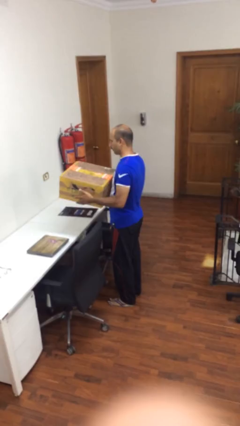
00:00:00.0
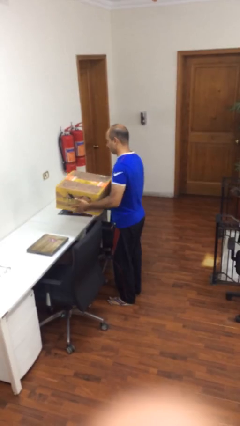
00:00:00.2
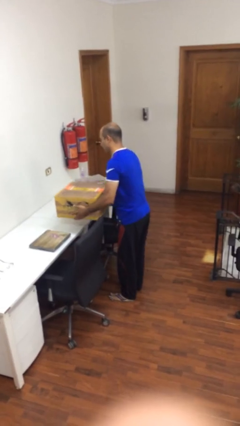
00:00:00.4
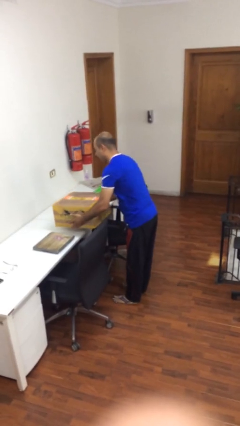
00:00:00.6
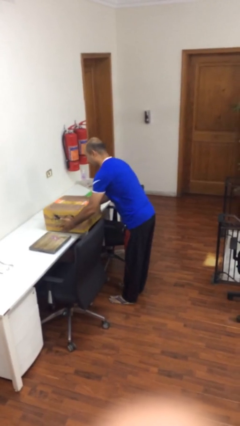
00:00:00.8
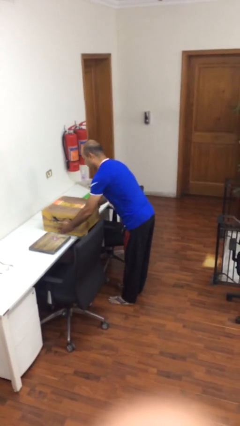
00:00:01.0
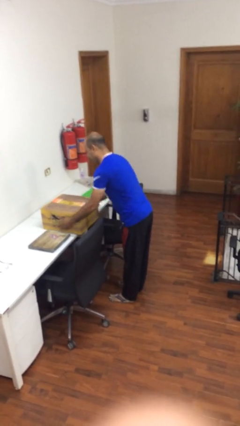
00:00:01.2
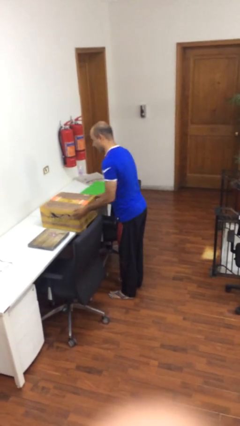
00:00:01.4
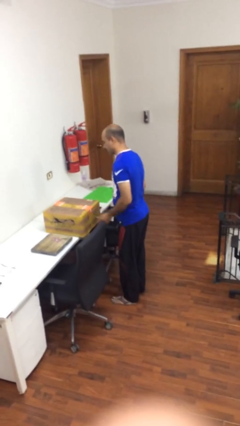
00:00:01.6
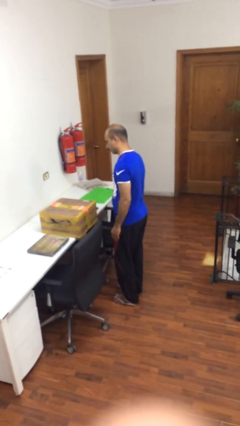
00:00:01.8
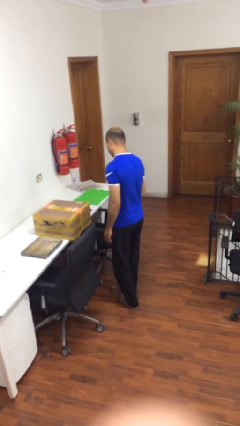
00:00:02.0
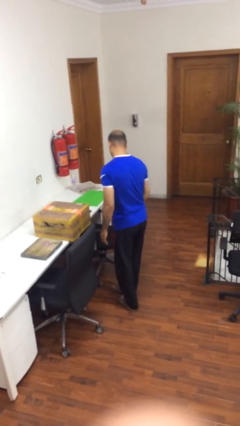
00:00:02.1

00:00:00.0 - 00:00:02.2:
person puts down object on table

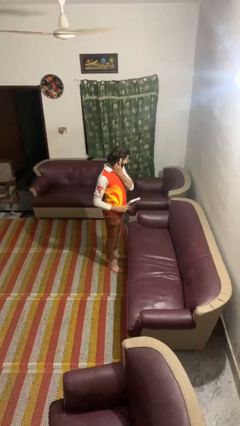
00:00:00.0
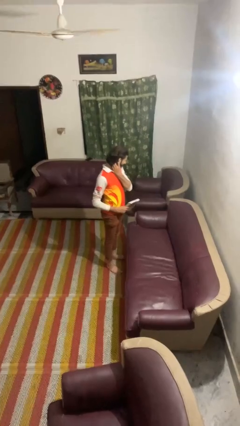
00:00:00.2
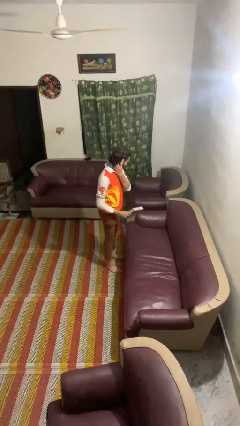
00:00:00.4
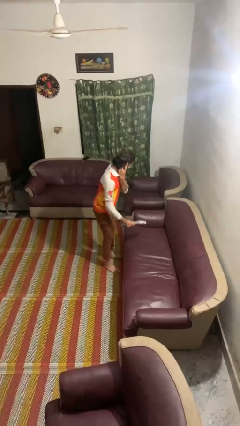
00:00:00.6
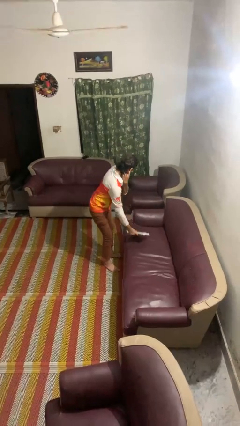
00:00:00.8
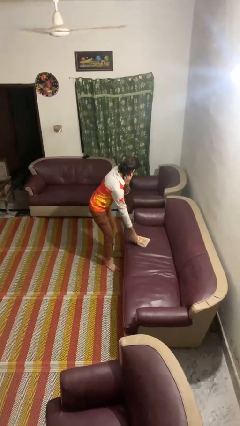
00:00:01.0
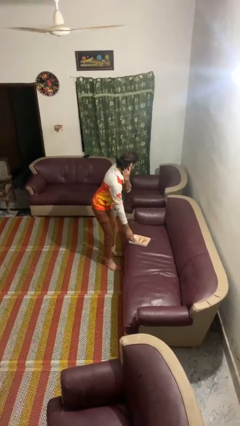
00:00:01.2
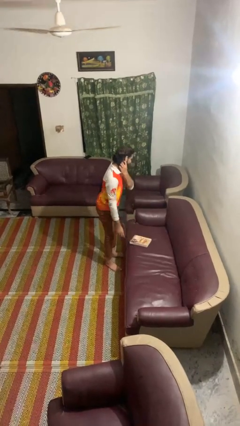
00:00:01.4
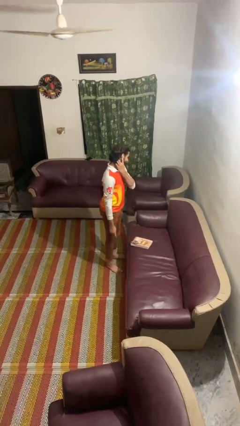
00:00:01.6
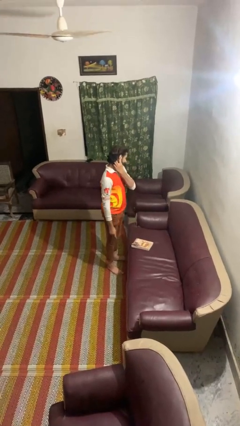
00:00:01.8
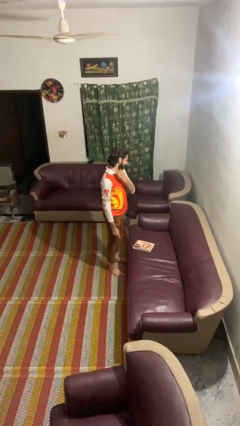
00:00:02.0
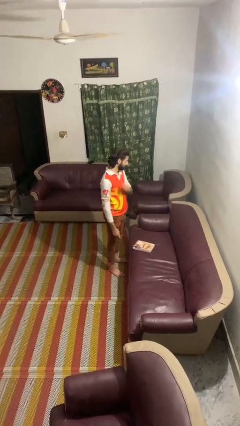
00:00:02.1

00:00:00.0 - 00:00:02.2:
person puts down object on couch

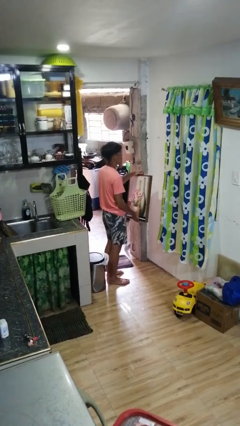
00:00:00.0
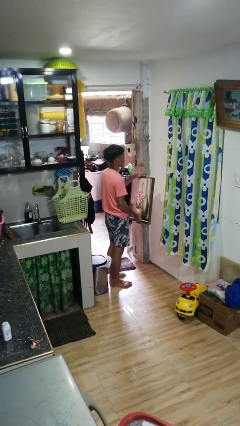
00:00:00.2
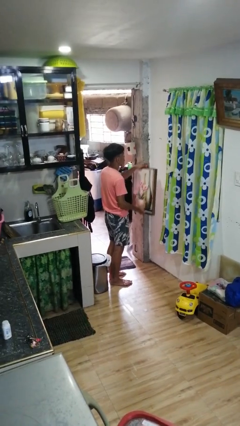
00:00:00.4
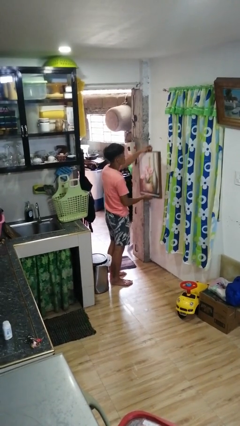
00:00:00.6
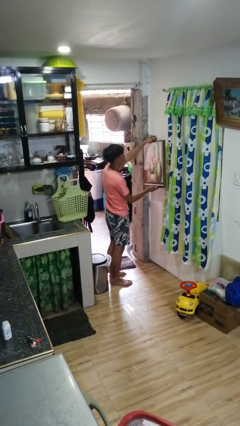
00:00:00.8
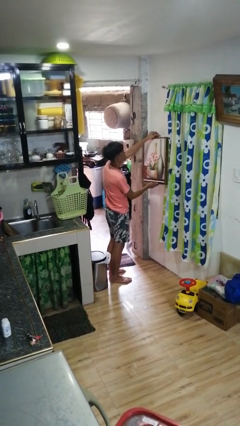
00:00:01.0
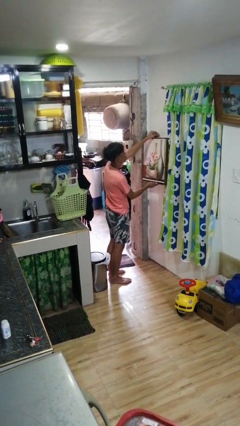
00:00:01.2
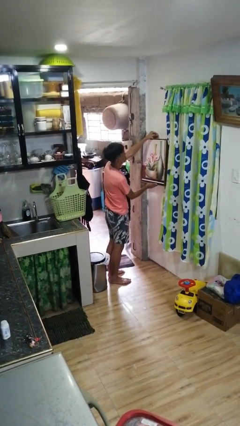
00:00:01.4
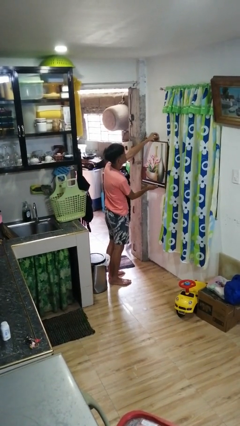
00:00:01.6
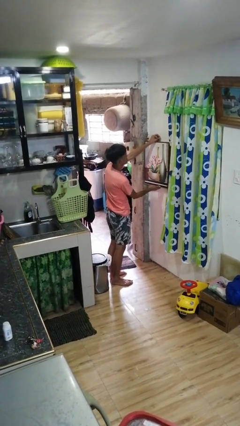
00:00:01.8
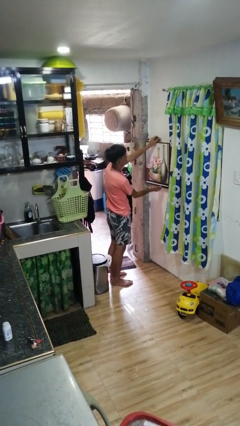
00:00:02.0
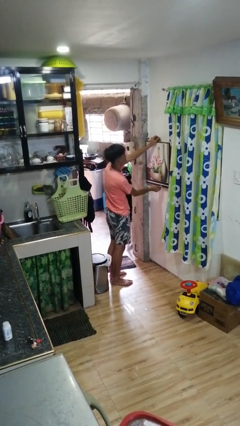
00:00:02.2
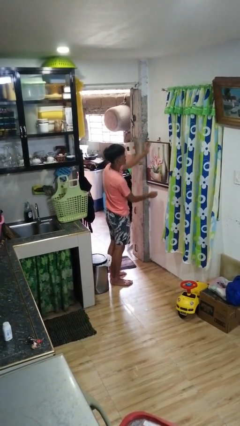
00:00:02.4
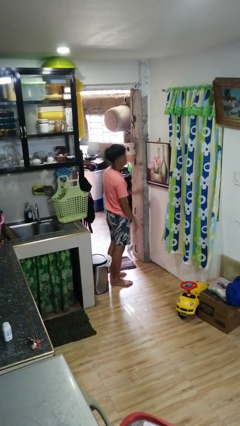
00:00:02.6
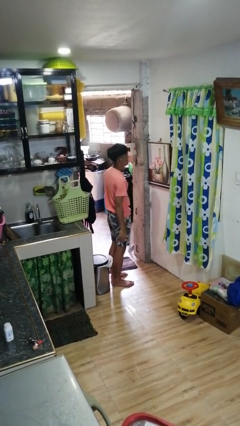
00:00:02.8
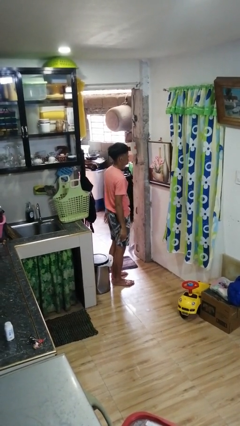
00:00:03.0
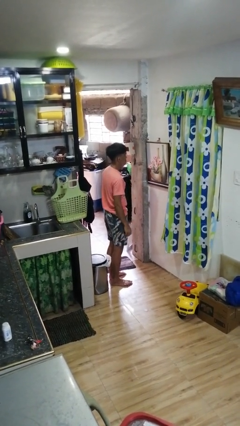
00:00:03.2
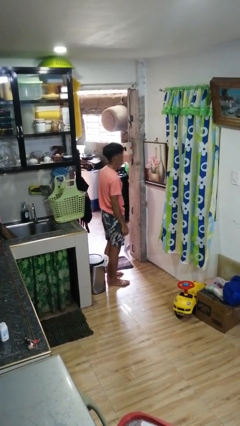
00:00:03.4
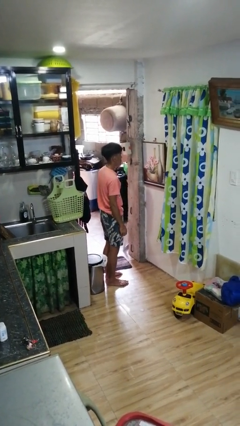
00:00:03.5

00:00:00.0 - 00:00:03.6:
person puts up picture frame

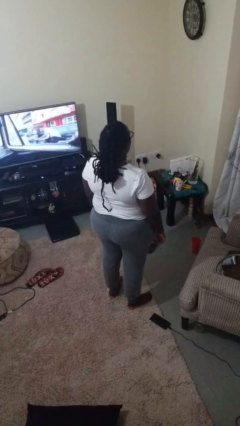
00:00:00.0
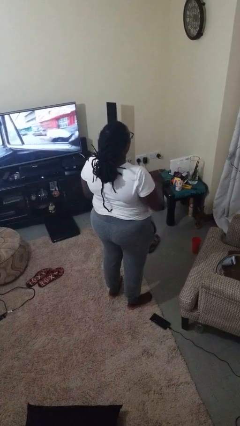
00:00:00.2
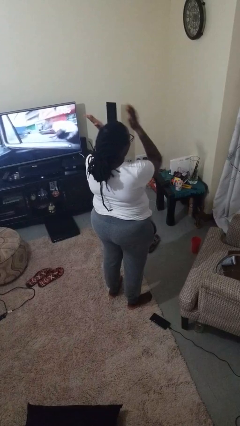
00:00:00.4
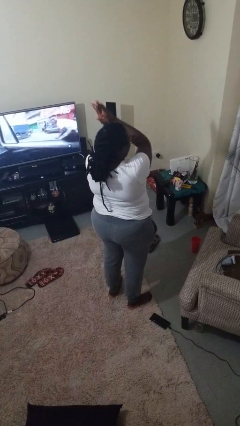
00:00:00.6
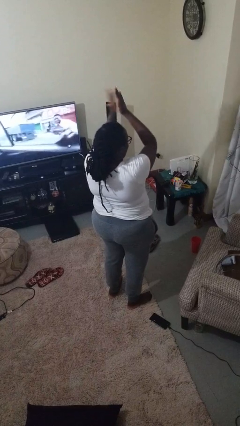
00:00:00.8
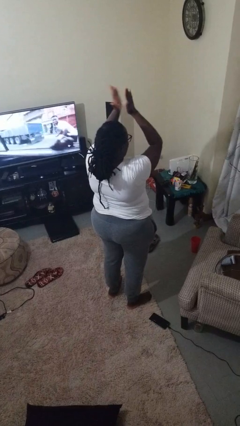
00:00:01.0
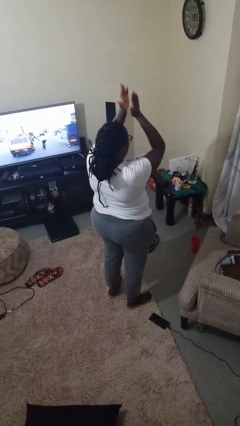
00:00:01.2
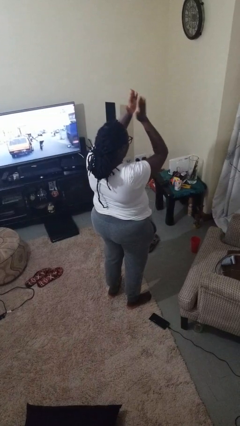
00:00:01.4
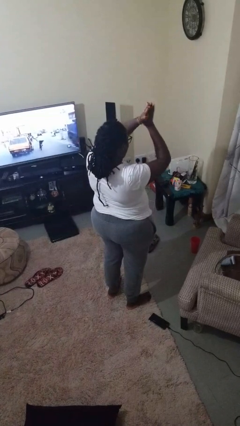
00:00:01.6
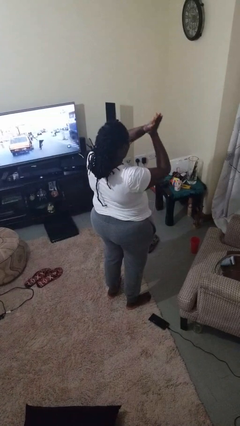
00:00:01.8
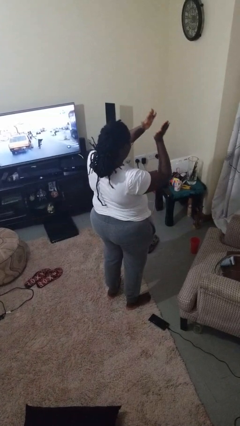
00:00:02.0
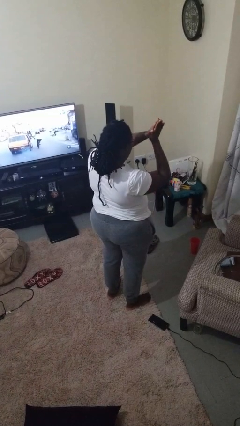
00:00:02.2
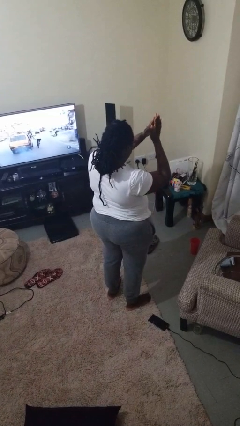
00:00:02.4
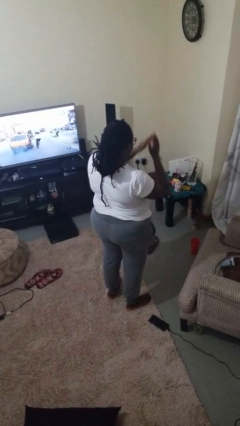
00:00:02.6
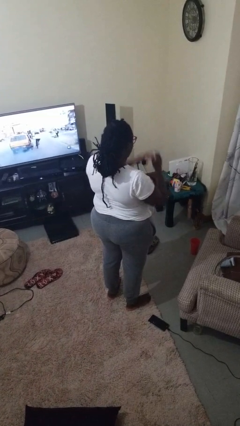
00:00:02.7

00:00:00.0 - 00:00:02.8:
person claps hands

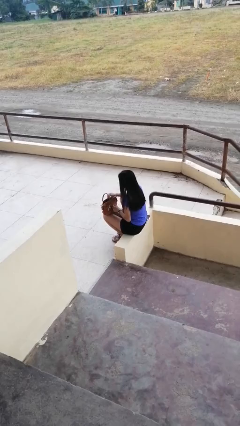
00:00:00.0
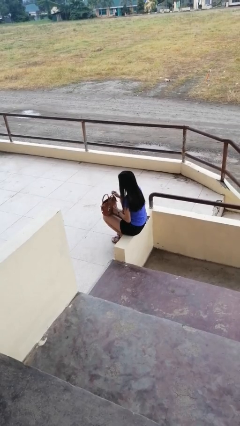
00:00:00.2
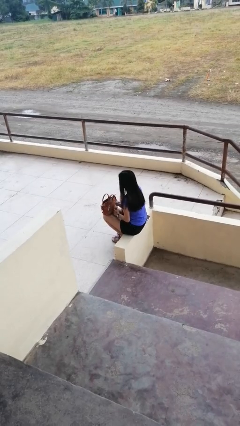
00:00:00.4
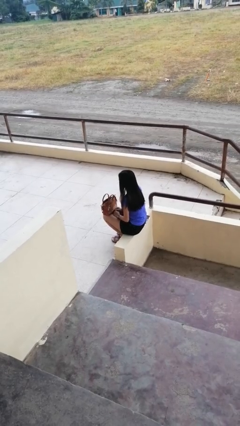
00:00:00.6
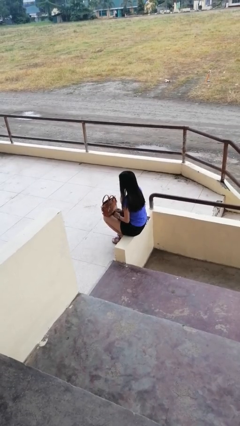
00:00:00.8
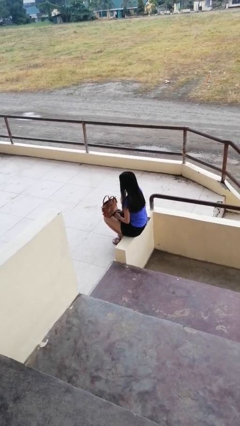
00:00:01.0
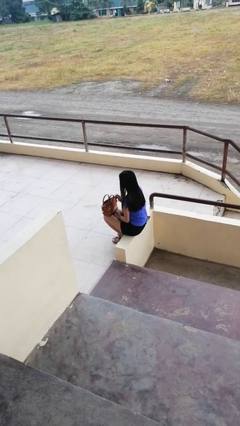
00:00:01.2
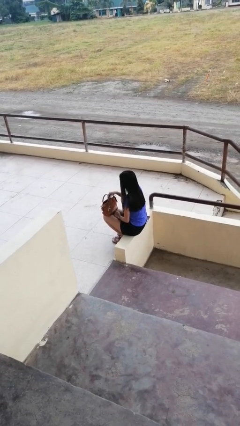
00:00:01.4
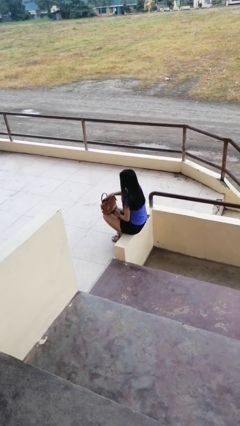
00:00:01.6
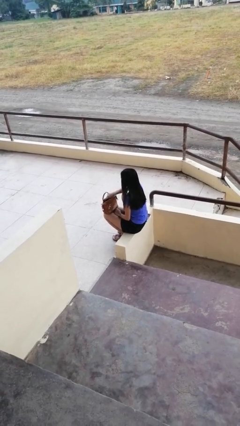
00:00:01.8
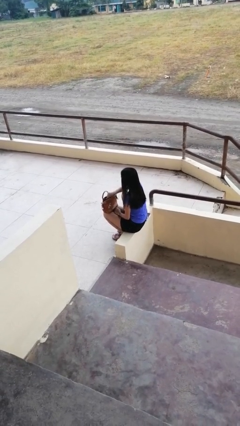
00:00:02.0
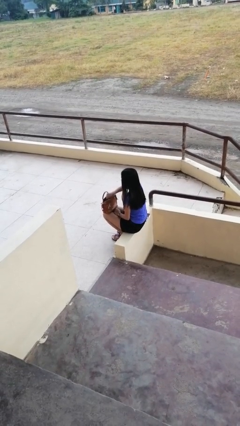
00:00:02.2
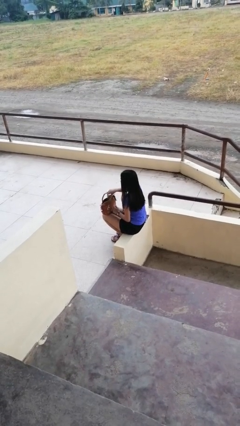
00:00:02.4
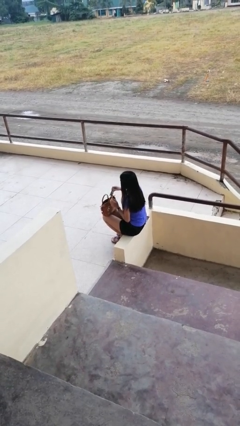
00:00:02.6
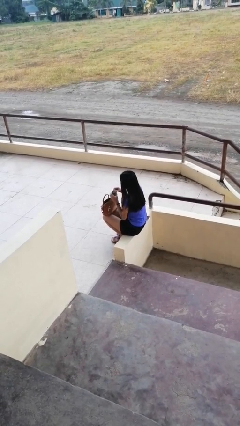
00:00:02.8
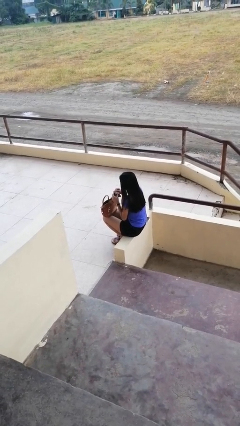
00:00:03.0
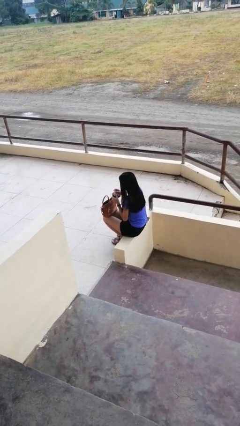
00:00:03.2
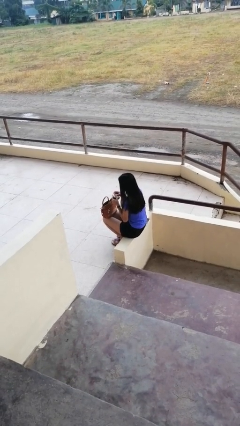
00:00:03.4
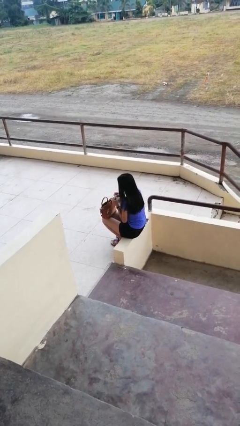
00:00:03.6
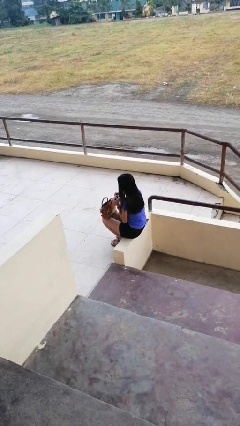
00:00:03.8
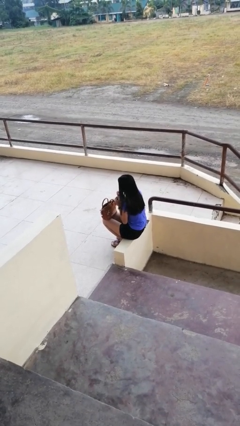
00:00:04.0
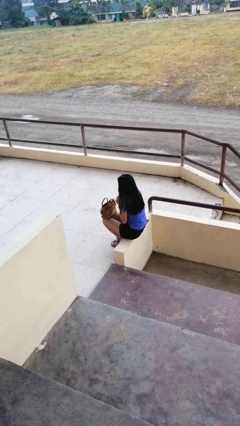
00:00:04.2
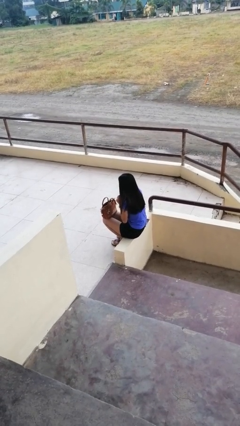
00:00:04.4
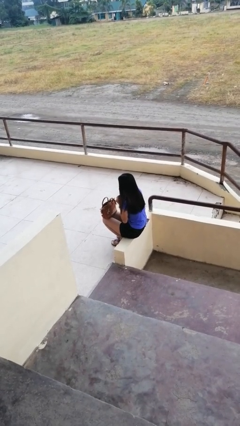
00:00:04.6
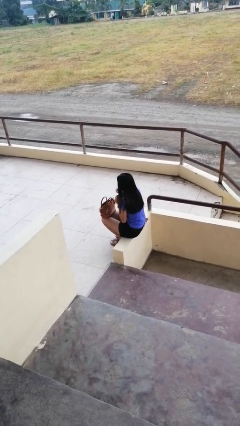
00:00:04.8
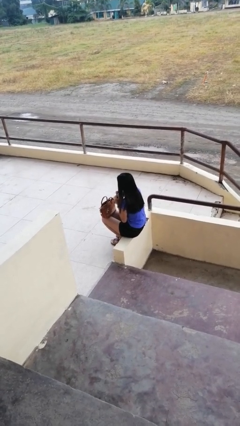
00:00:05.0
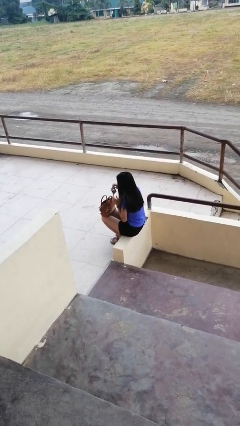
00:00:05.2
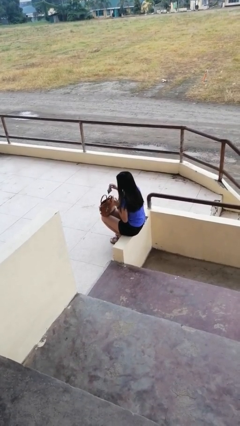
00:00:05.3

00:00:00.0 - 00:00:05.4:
person eats snack from bag

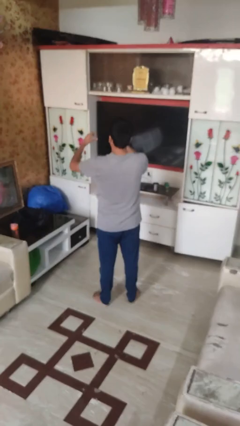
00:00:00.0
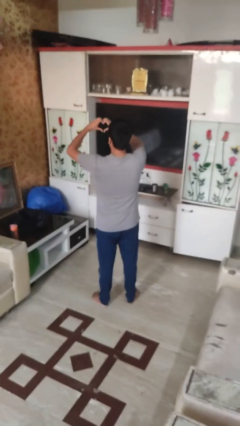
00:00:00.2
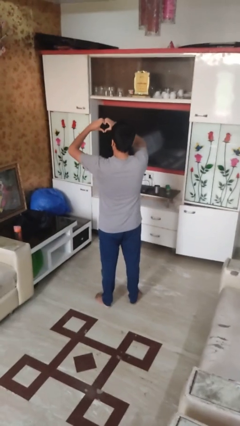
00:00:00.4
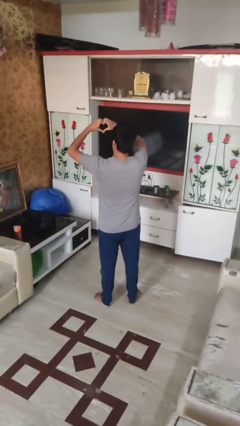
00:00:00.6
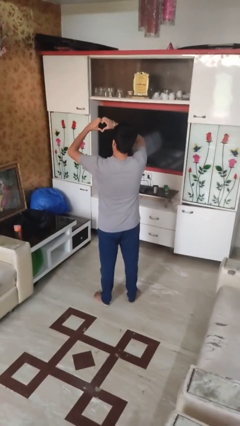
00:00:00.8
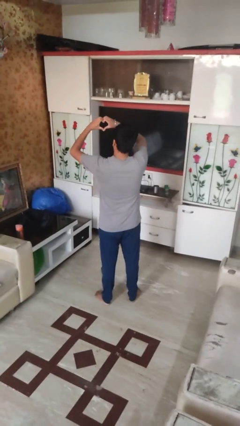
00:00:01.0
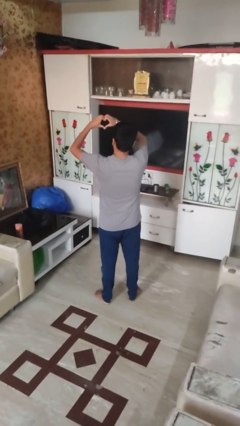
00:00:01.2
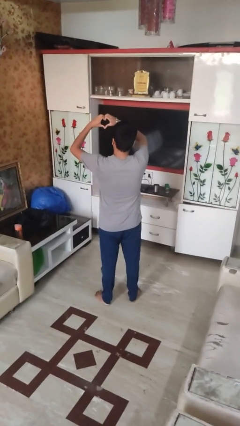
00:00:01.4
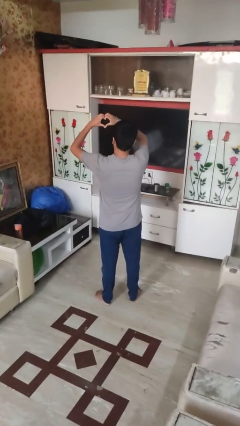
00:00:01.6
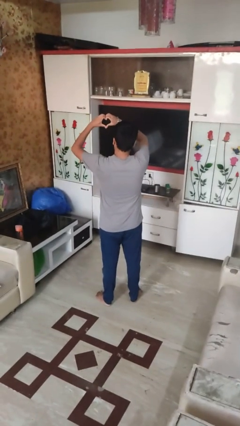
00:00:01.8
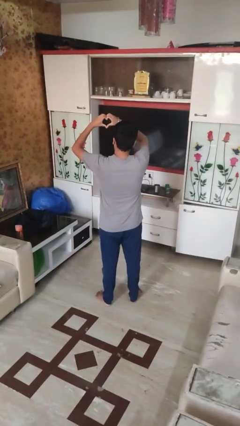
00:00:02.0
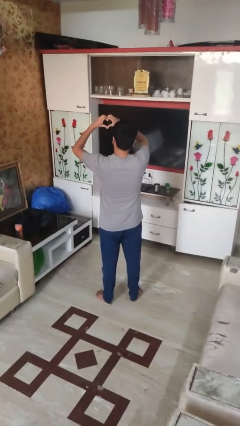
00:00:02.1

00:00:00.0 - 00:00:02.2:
person gestures heart
